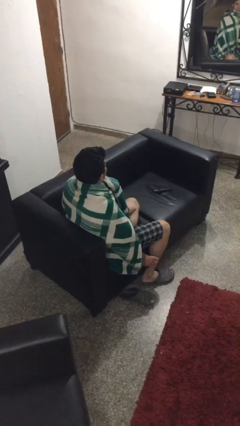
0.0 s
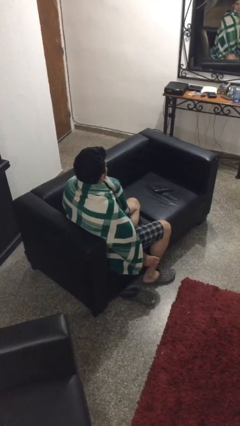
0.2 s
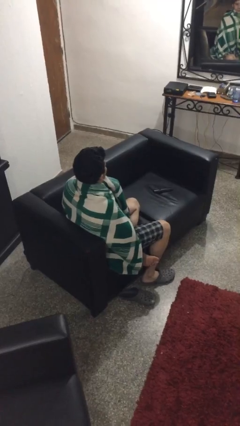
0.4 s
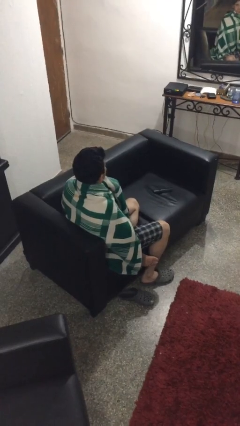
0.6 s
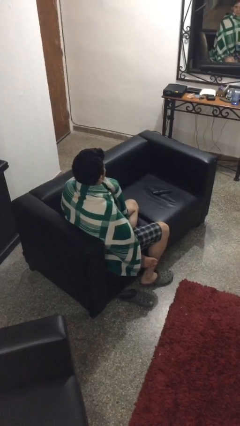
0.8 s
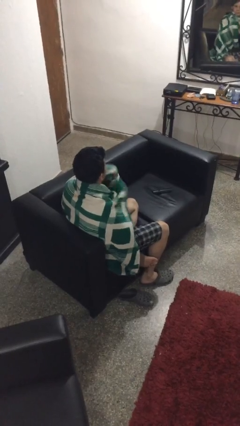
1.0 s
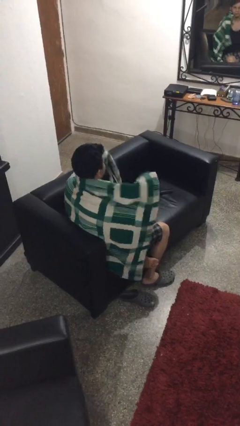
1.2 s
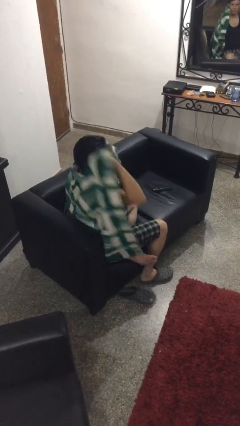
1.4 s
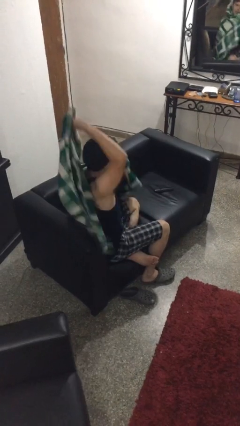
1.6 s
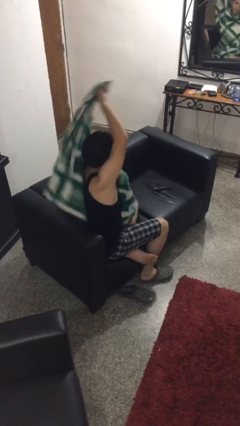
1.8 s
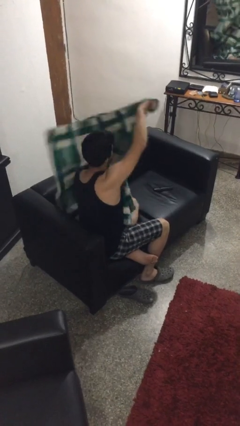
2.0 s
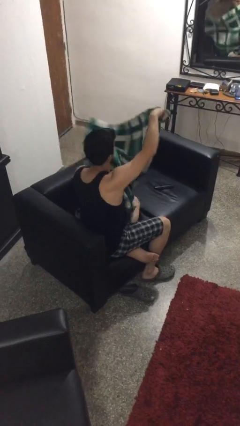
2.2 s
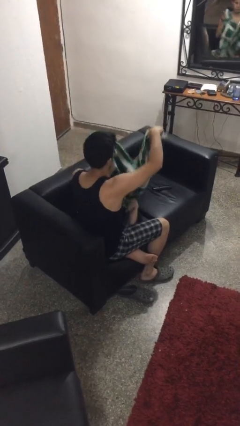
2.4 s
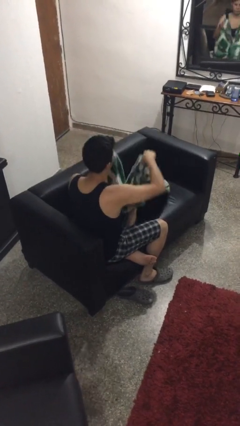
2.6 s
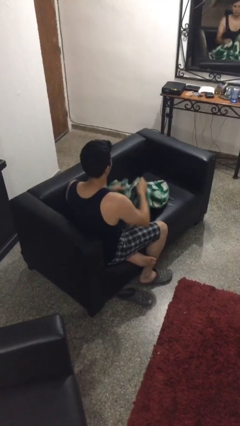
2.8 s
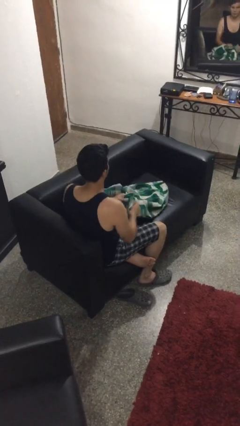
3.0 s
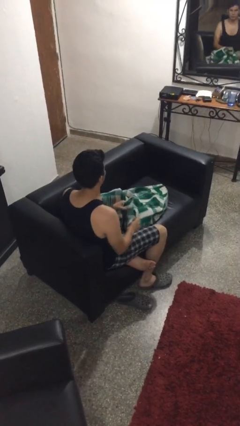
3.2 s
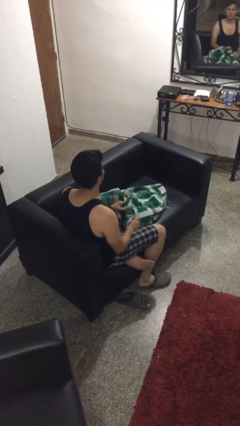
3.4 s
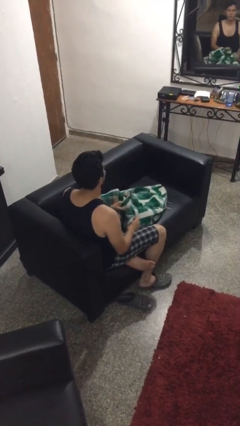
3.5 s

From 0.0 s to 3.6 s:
person uncovers with blanket

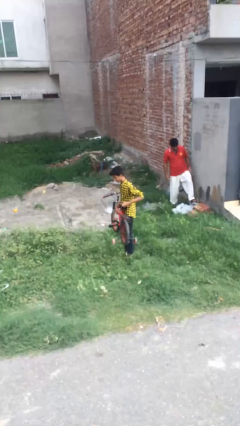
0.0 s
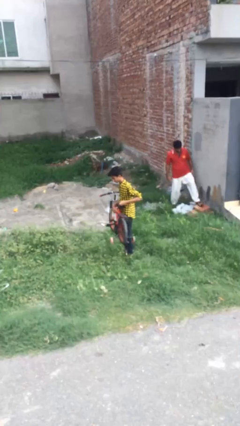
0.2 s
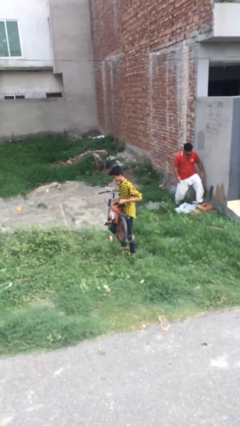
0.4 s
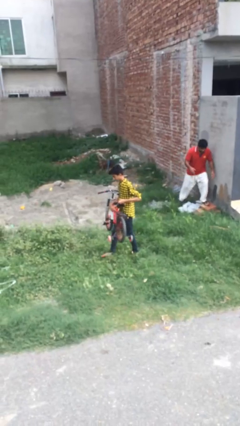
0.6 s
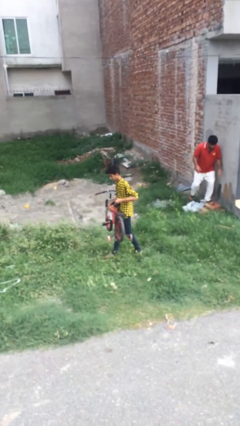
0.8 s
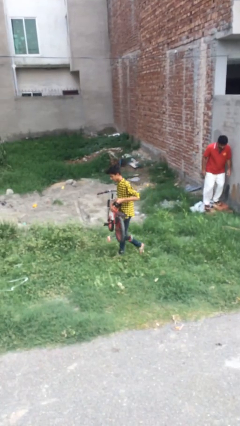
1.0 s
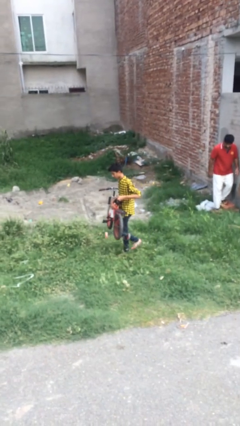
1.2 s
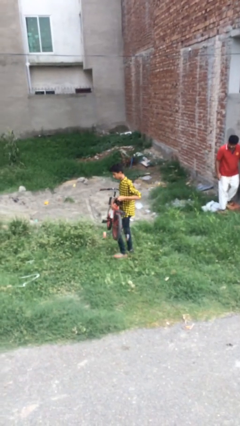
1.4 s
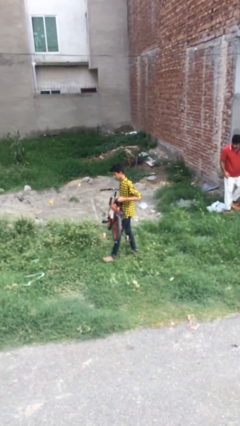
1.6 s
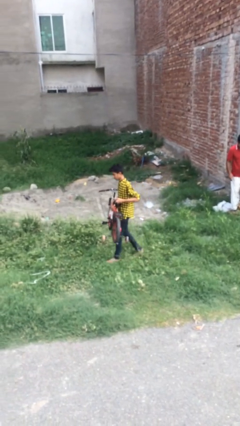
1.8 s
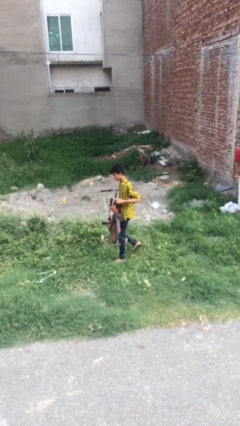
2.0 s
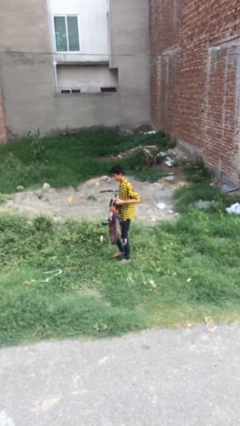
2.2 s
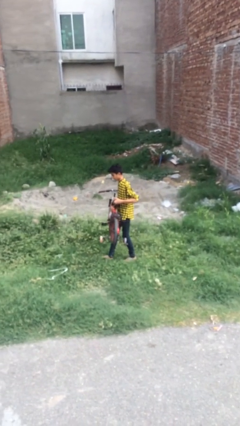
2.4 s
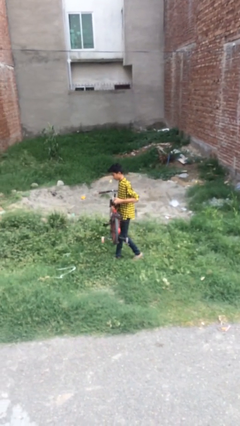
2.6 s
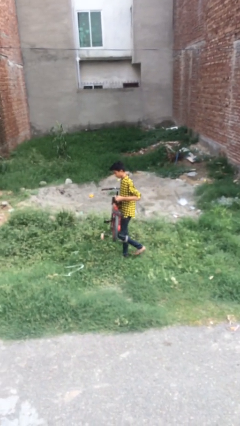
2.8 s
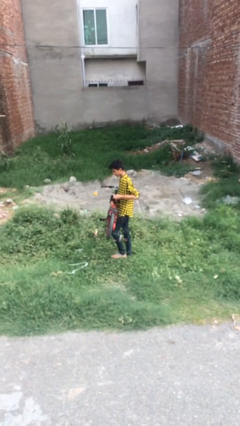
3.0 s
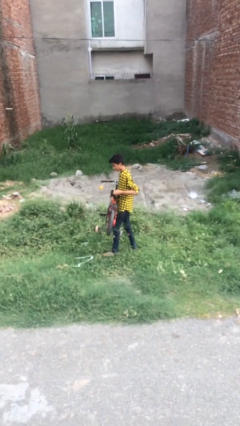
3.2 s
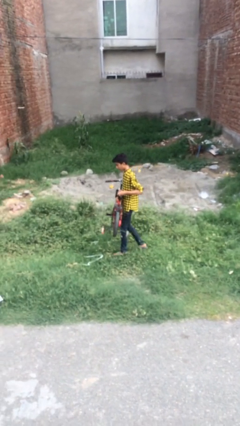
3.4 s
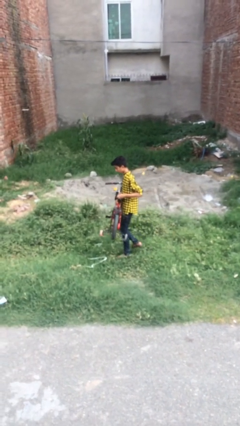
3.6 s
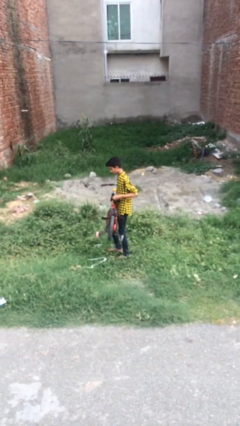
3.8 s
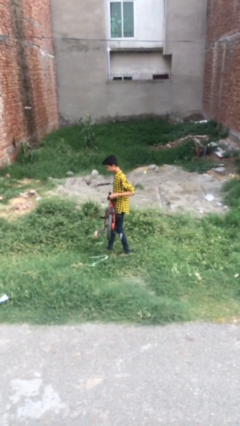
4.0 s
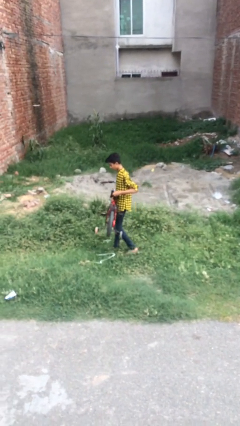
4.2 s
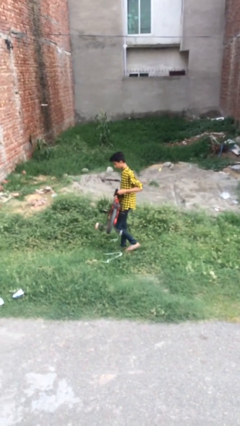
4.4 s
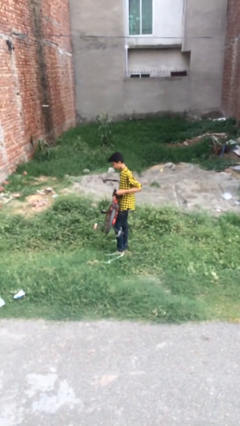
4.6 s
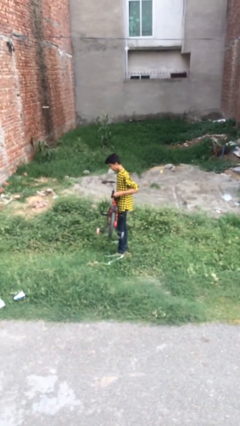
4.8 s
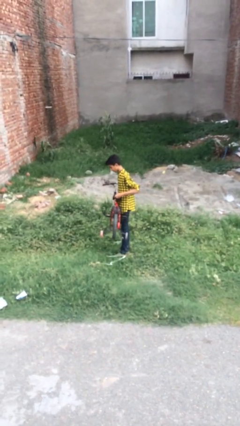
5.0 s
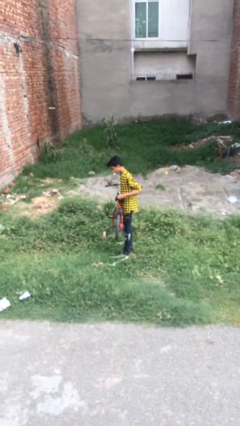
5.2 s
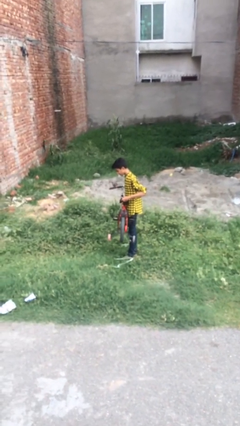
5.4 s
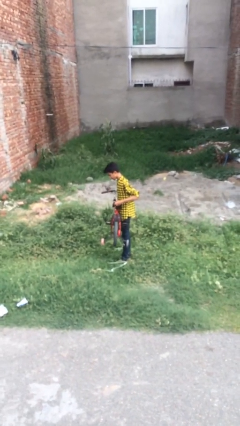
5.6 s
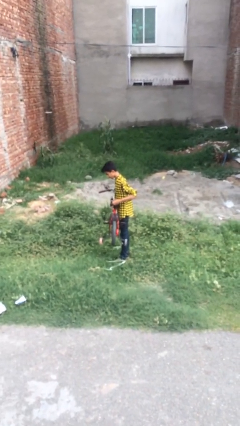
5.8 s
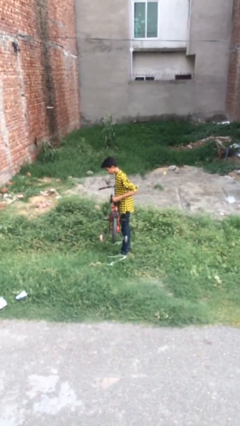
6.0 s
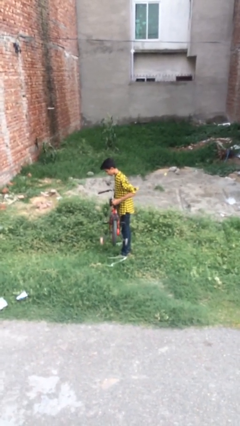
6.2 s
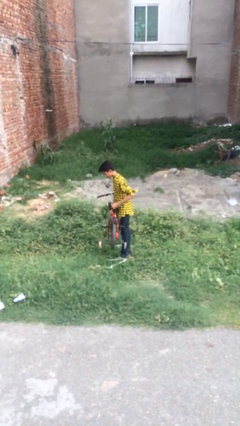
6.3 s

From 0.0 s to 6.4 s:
person carries heavy object

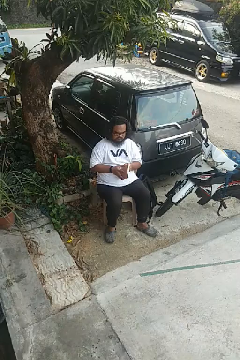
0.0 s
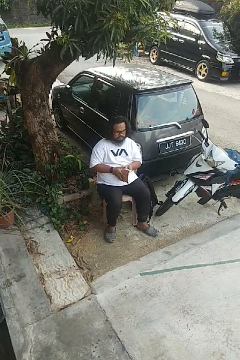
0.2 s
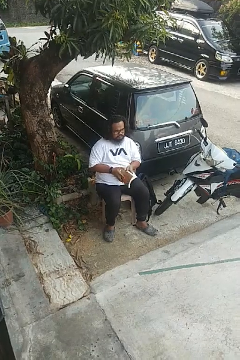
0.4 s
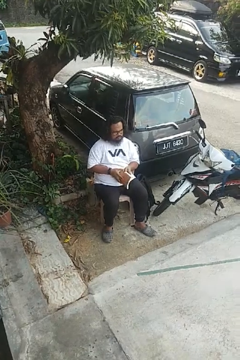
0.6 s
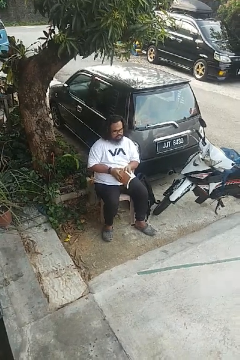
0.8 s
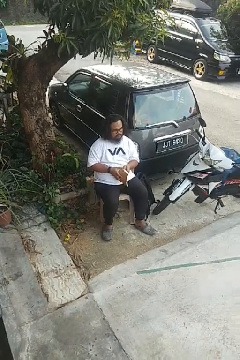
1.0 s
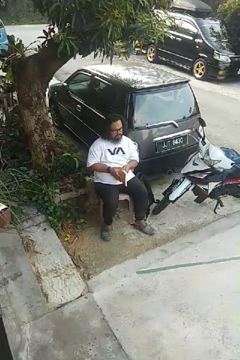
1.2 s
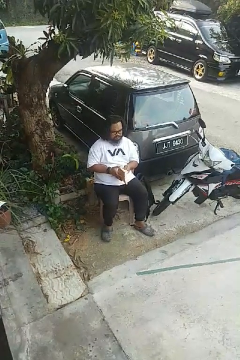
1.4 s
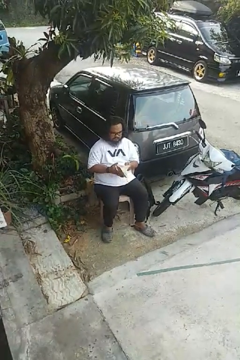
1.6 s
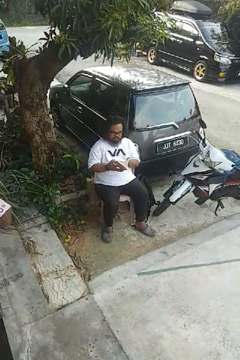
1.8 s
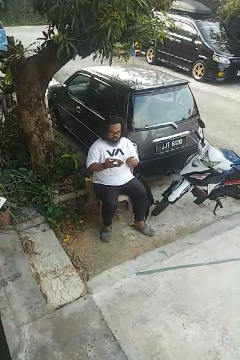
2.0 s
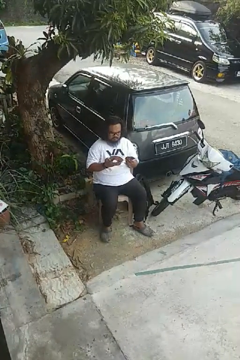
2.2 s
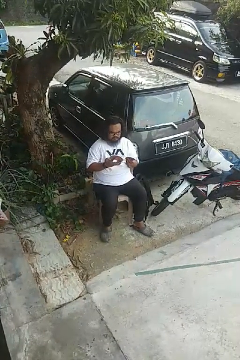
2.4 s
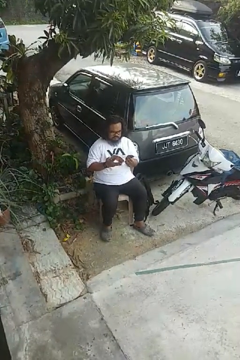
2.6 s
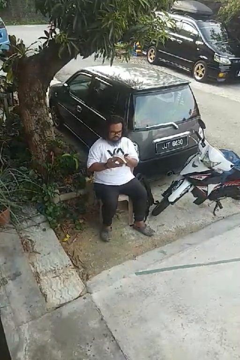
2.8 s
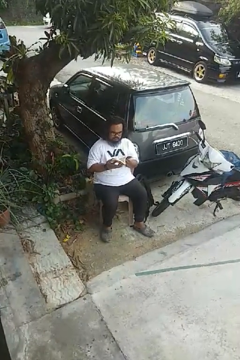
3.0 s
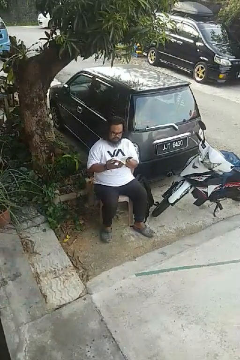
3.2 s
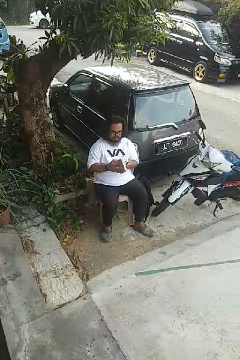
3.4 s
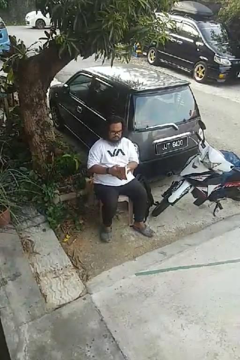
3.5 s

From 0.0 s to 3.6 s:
person reads book

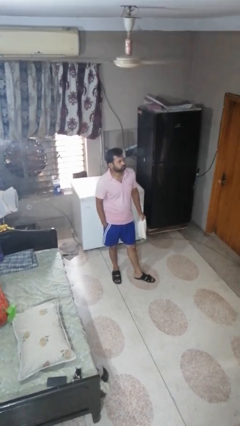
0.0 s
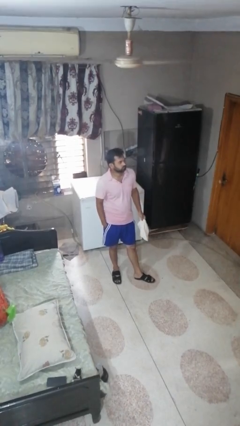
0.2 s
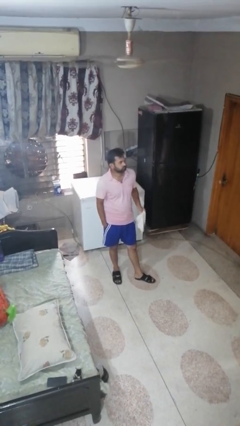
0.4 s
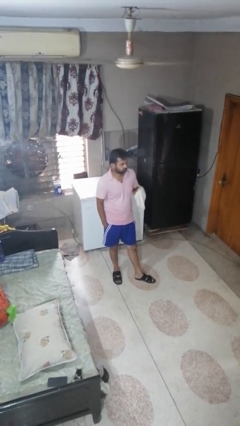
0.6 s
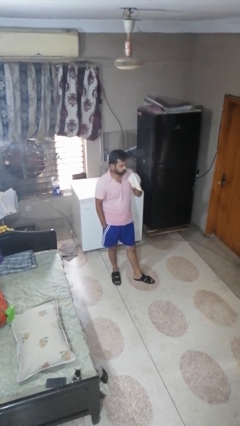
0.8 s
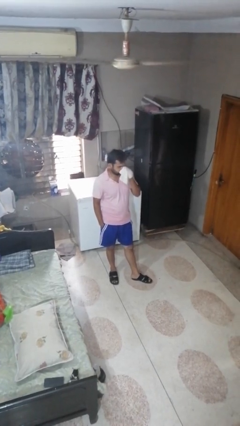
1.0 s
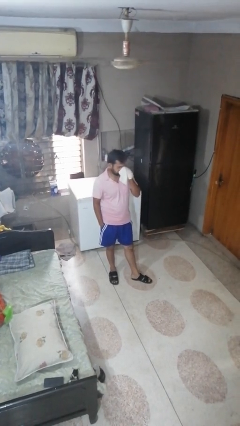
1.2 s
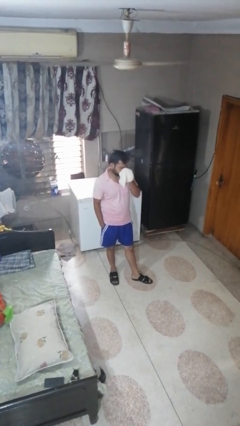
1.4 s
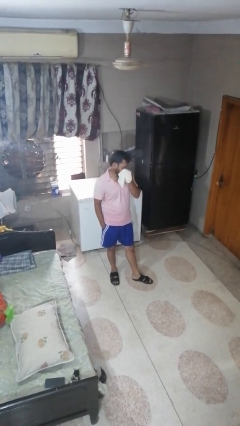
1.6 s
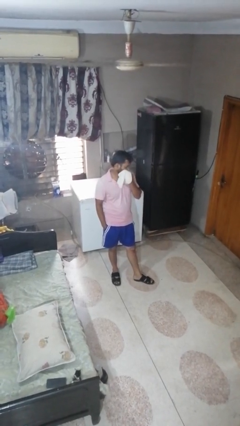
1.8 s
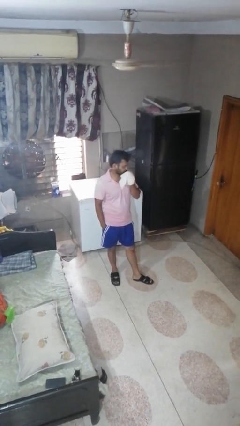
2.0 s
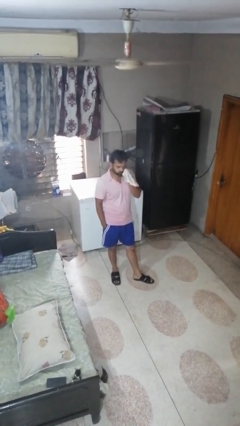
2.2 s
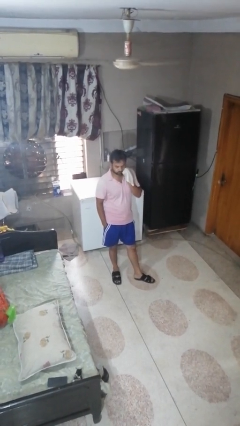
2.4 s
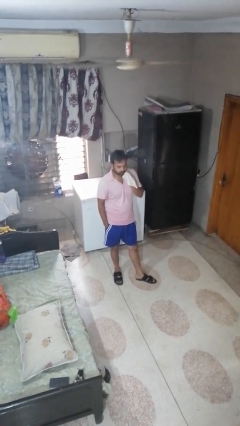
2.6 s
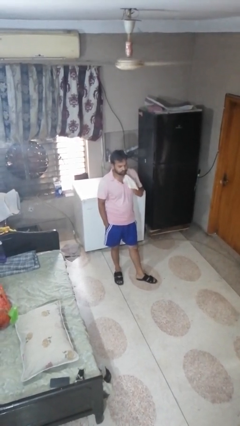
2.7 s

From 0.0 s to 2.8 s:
person wipes mouth with napkin

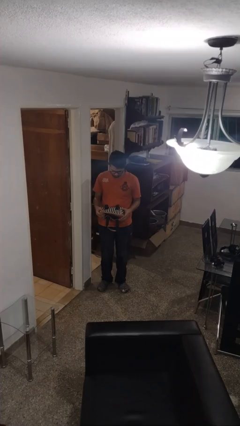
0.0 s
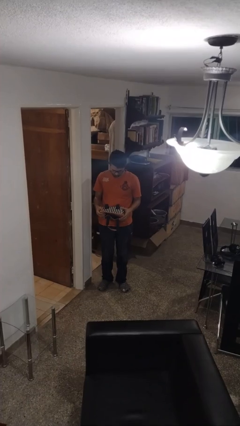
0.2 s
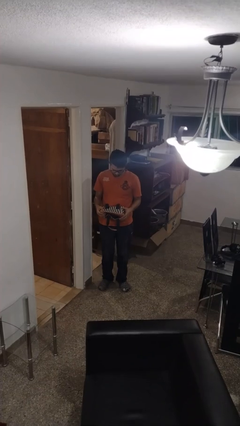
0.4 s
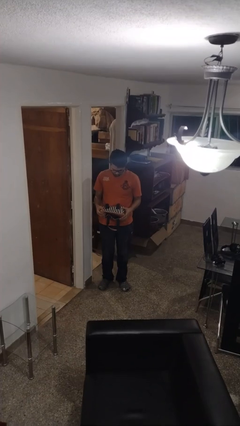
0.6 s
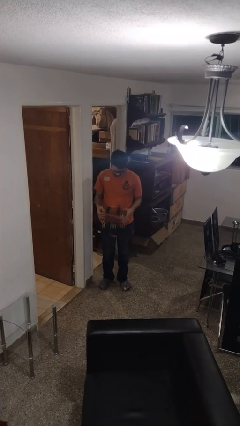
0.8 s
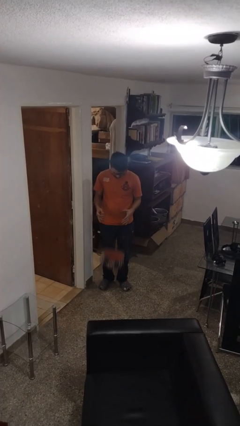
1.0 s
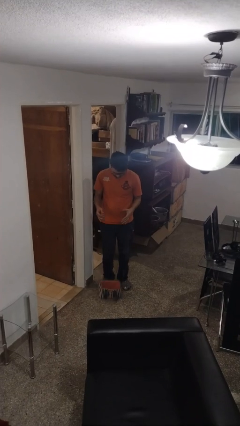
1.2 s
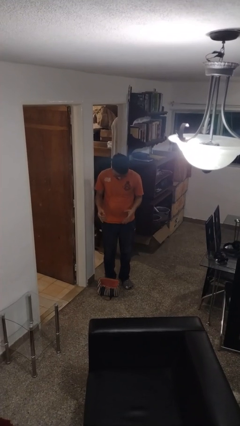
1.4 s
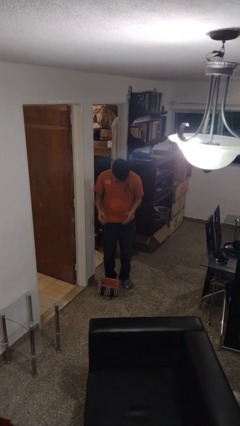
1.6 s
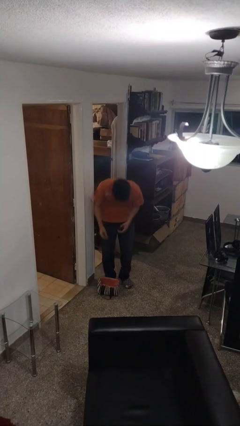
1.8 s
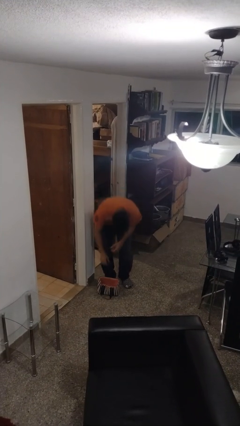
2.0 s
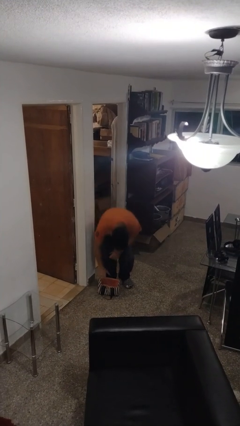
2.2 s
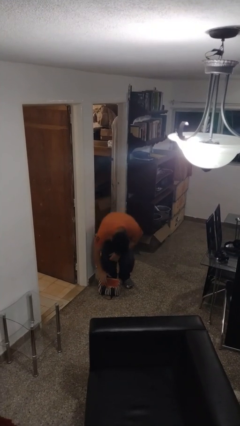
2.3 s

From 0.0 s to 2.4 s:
person drops object
